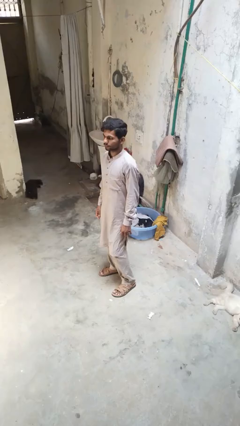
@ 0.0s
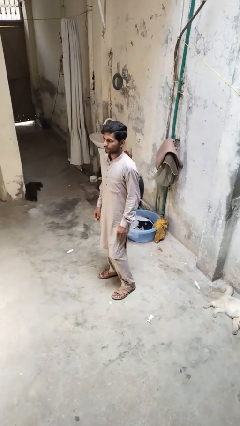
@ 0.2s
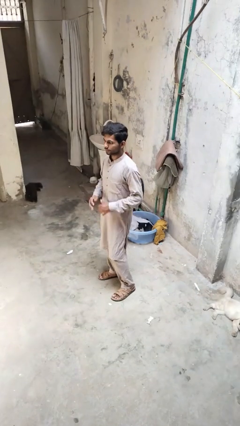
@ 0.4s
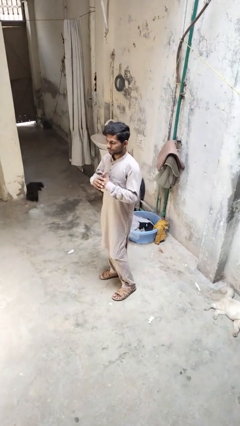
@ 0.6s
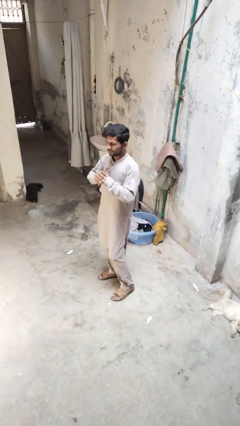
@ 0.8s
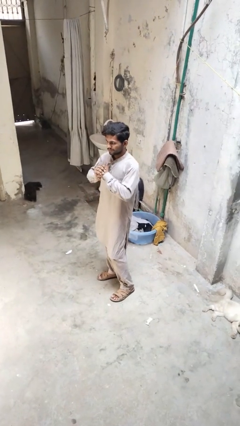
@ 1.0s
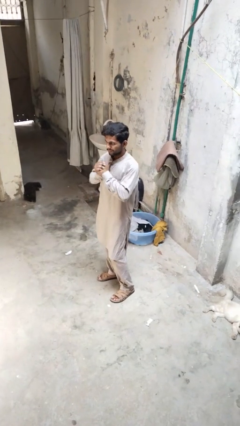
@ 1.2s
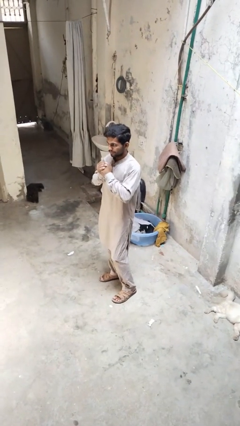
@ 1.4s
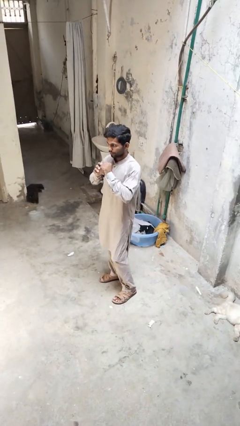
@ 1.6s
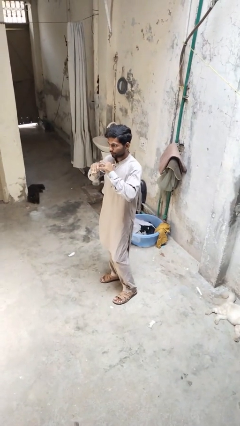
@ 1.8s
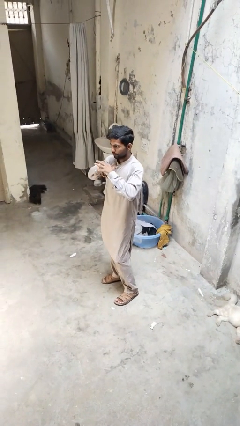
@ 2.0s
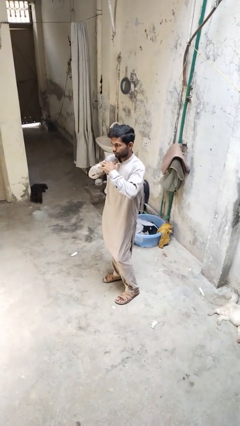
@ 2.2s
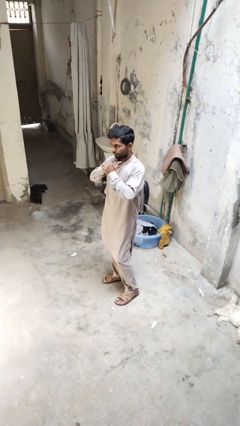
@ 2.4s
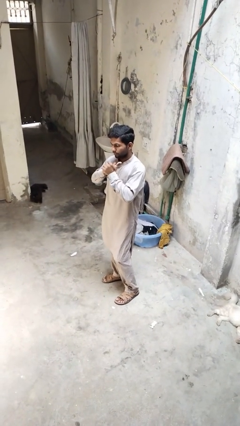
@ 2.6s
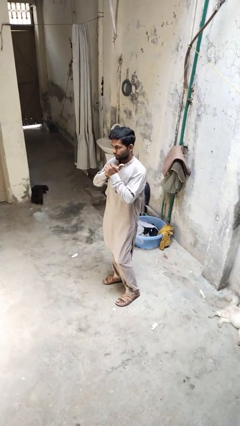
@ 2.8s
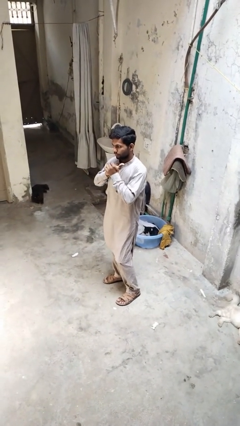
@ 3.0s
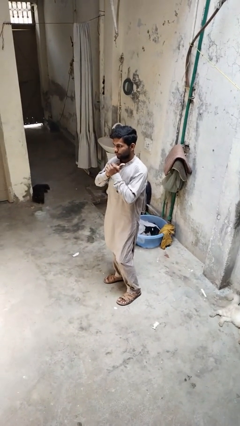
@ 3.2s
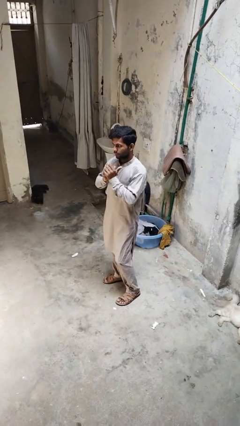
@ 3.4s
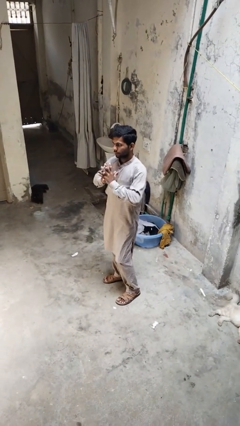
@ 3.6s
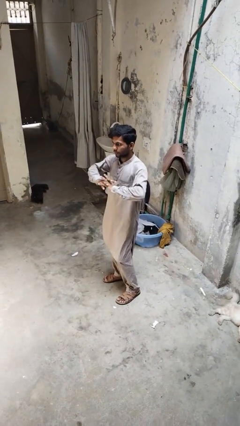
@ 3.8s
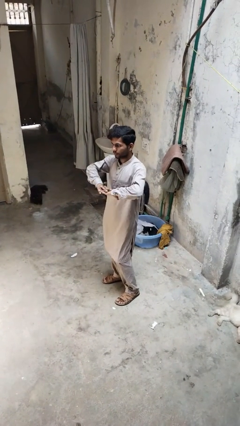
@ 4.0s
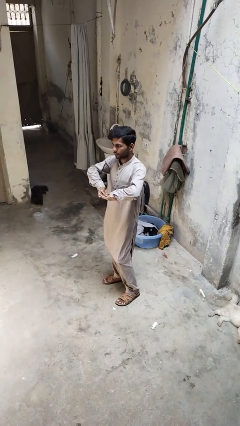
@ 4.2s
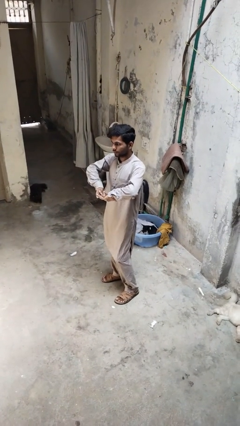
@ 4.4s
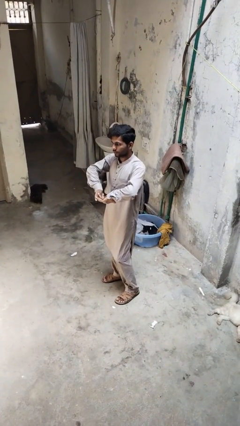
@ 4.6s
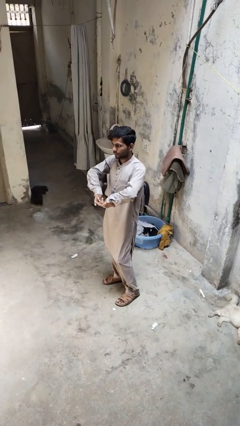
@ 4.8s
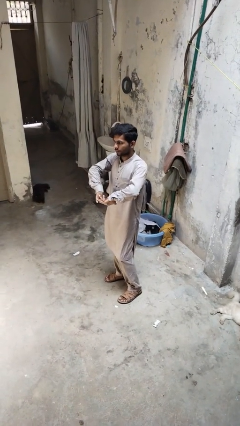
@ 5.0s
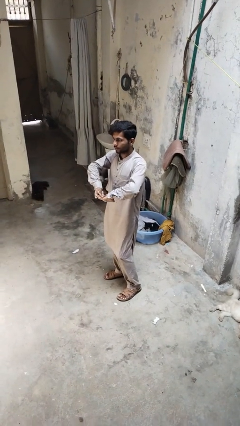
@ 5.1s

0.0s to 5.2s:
person cracks knuckles

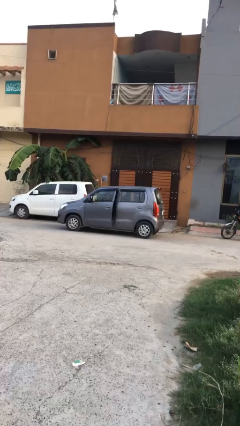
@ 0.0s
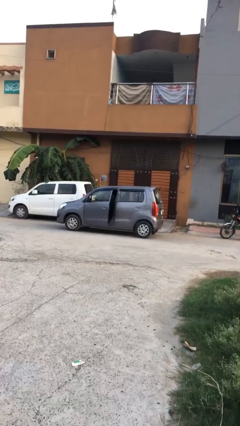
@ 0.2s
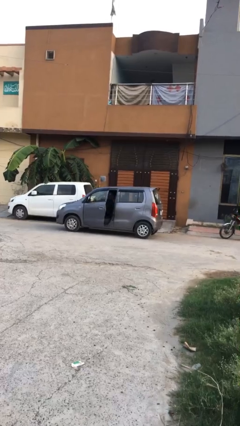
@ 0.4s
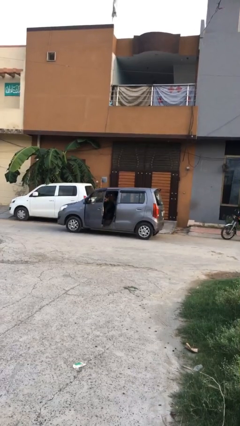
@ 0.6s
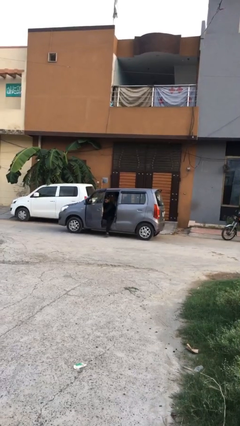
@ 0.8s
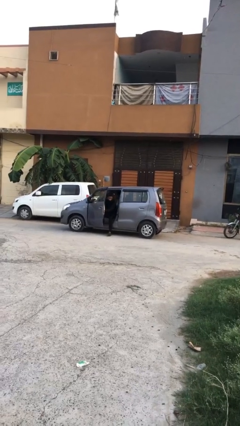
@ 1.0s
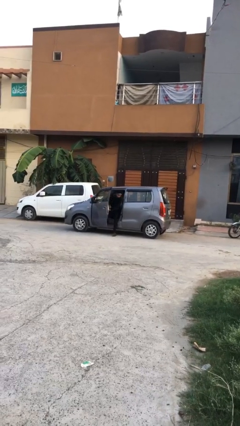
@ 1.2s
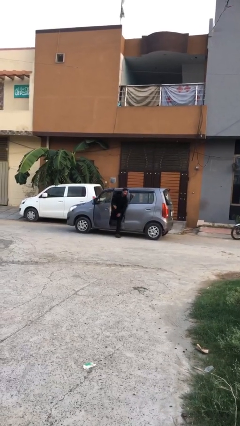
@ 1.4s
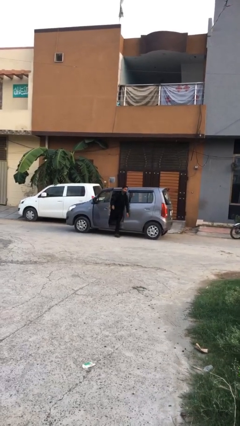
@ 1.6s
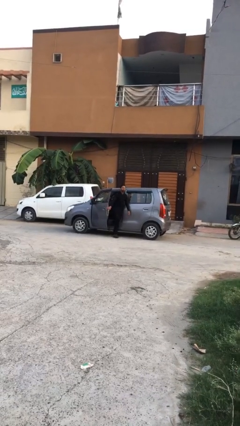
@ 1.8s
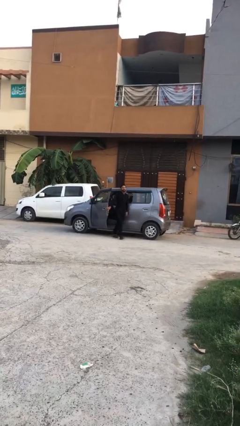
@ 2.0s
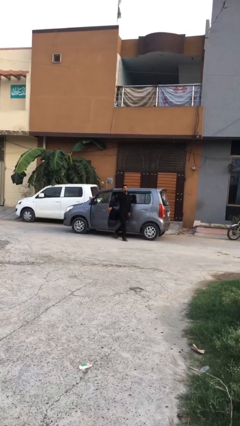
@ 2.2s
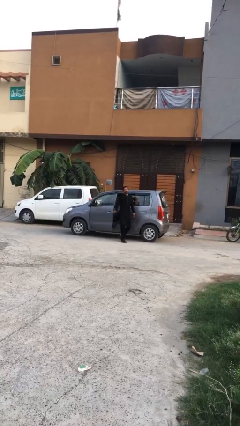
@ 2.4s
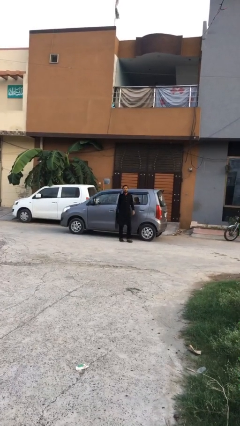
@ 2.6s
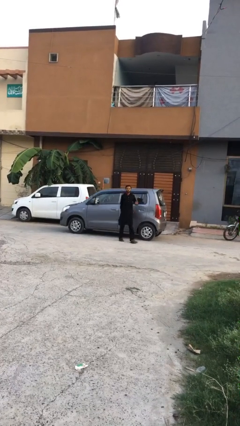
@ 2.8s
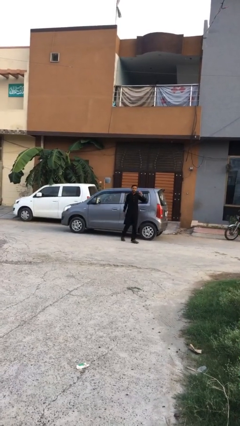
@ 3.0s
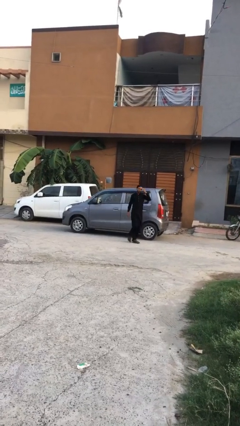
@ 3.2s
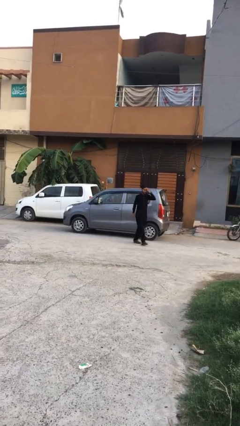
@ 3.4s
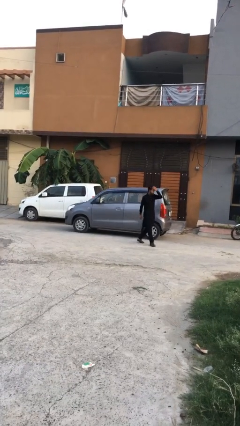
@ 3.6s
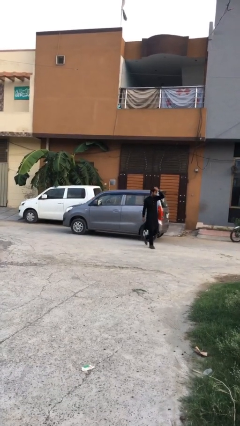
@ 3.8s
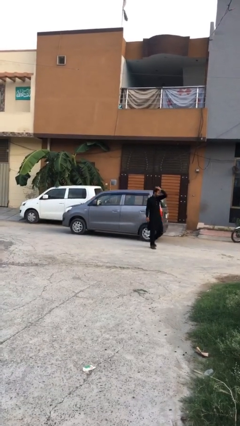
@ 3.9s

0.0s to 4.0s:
car drops off person

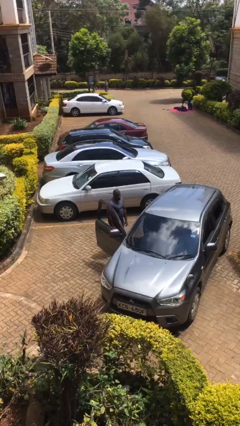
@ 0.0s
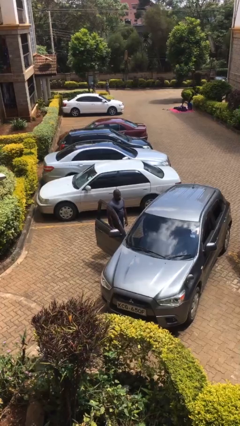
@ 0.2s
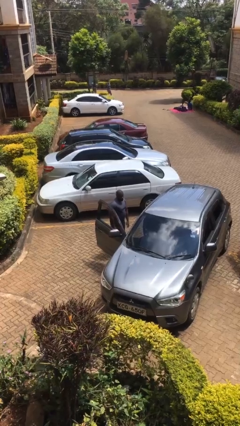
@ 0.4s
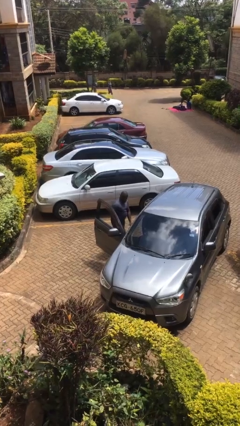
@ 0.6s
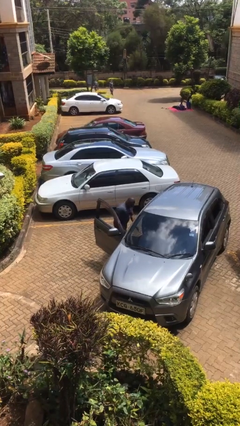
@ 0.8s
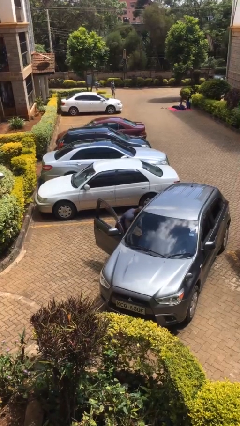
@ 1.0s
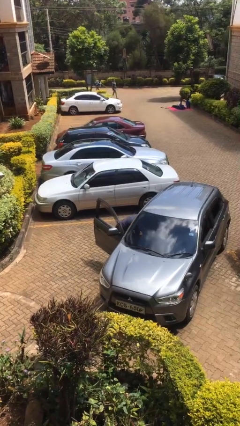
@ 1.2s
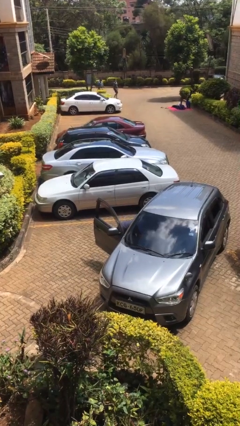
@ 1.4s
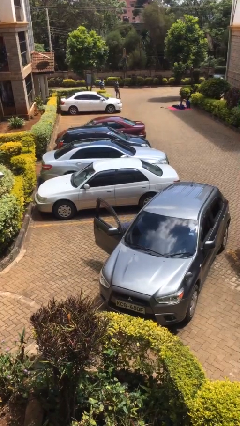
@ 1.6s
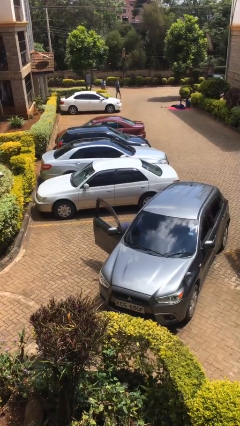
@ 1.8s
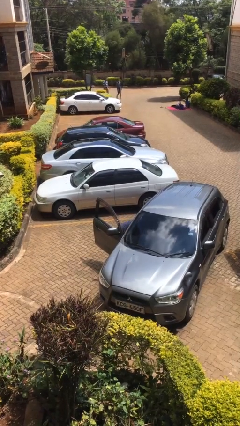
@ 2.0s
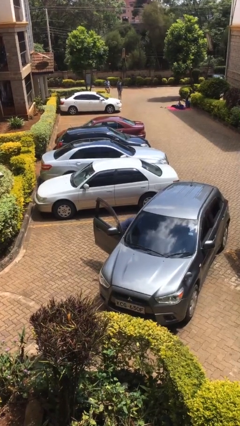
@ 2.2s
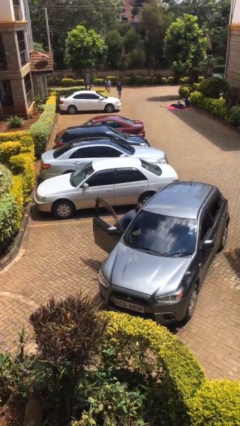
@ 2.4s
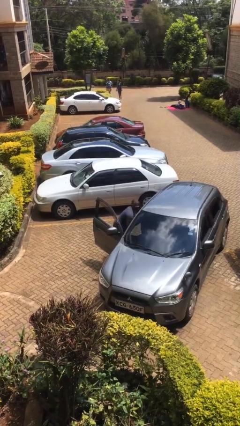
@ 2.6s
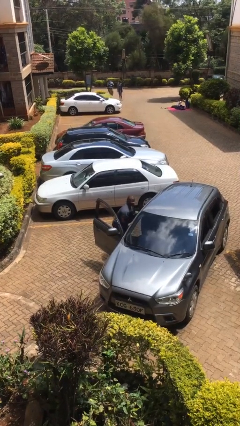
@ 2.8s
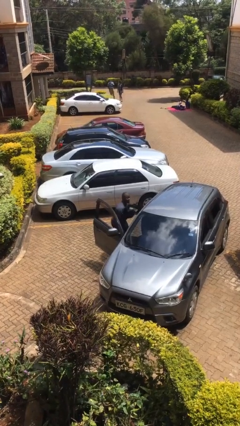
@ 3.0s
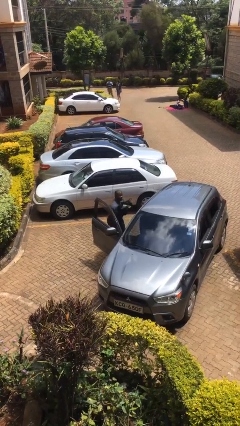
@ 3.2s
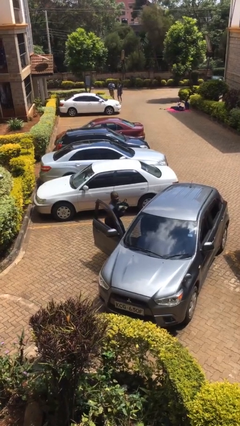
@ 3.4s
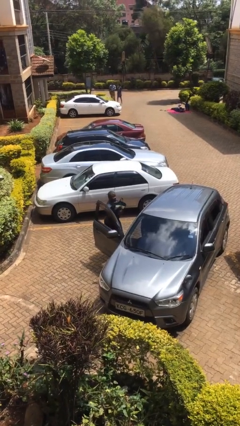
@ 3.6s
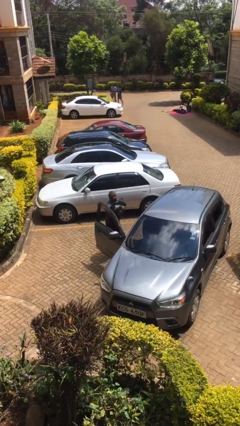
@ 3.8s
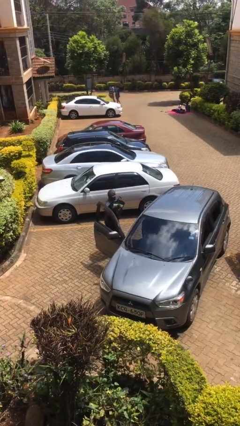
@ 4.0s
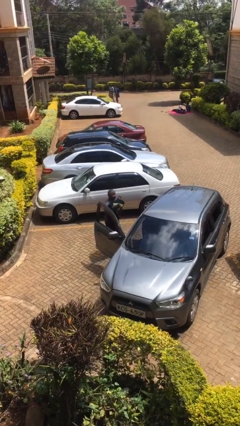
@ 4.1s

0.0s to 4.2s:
person unloads car

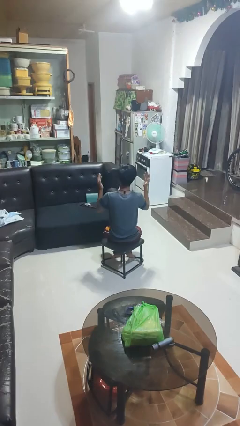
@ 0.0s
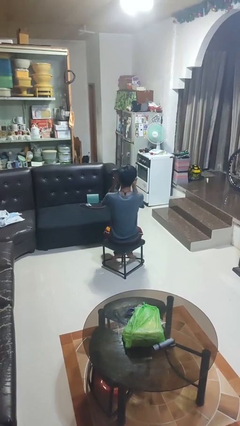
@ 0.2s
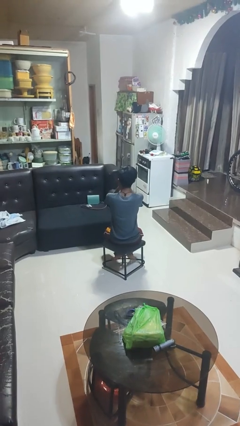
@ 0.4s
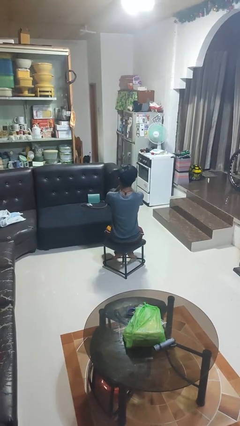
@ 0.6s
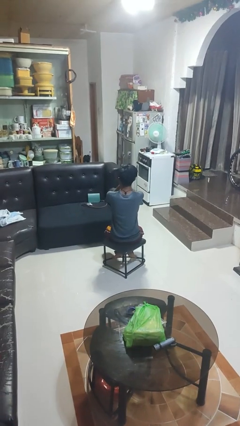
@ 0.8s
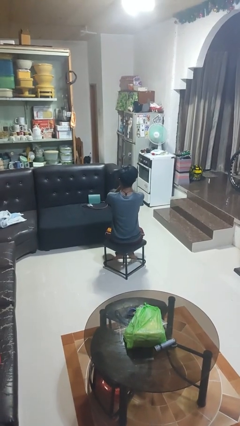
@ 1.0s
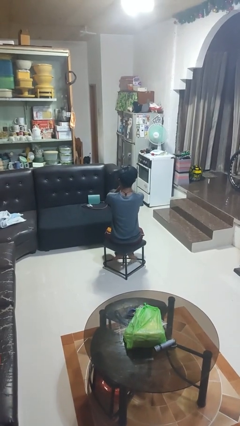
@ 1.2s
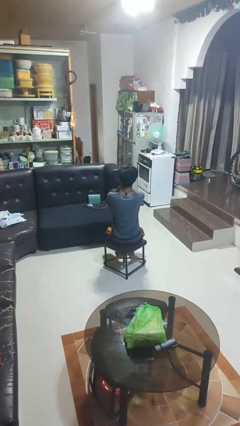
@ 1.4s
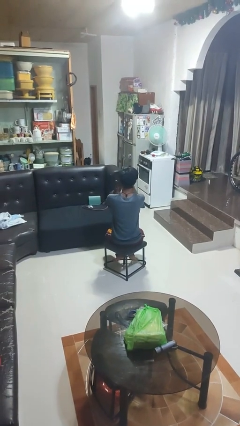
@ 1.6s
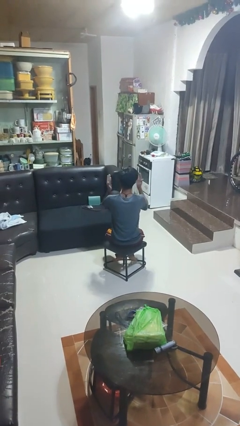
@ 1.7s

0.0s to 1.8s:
person covers face with hands

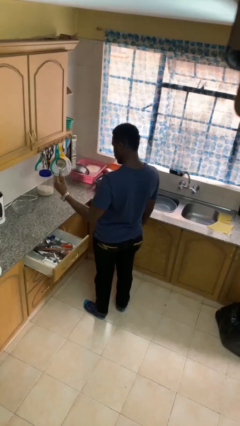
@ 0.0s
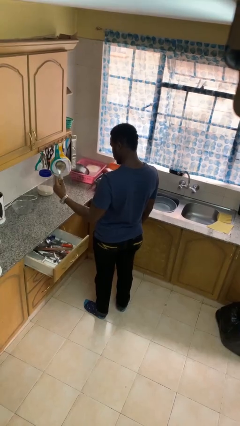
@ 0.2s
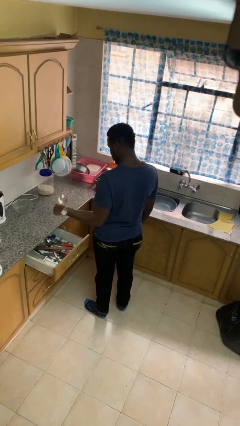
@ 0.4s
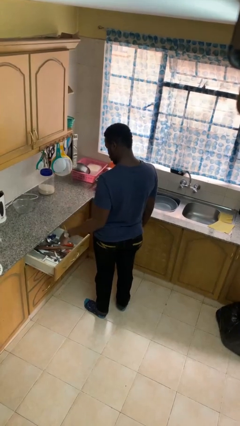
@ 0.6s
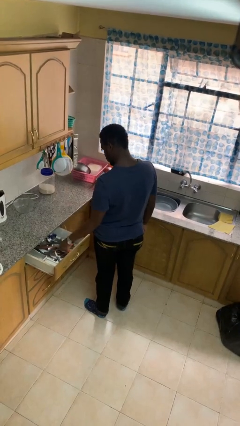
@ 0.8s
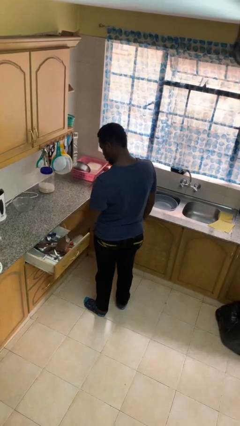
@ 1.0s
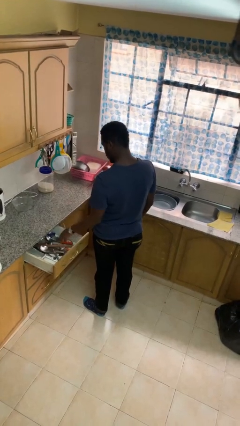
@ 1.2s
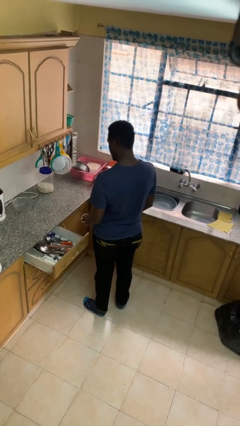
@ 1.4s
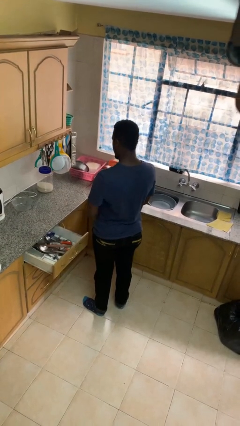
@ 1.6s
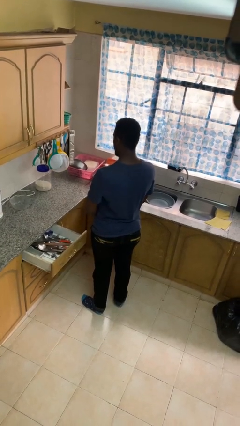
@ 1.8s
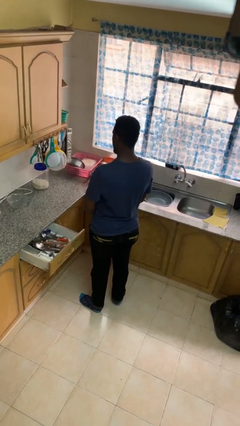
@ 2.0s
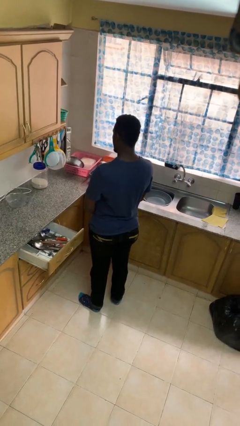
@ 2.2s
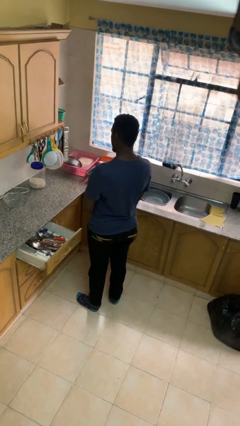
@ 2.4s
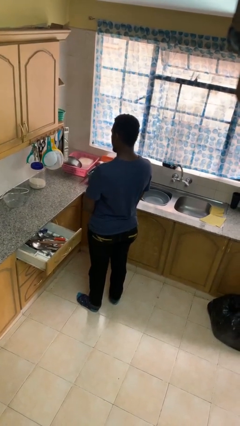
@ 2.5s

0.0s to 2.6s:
person puts object into kitchen drawer
